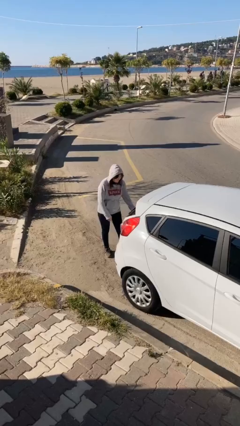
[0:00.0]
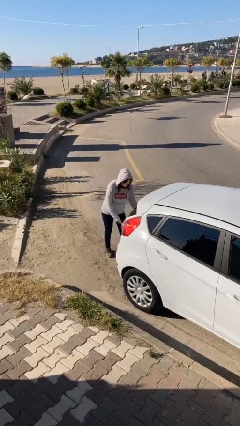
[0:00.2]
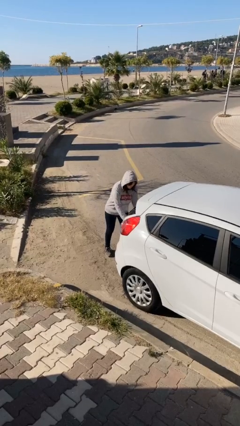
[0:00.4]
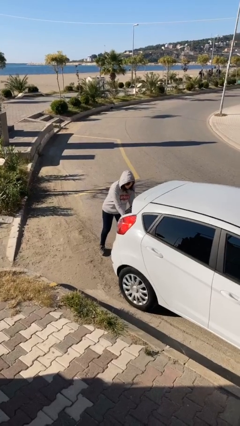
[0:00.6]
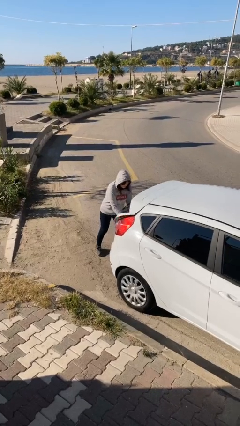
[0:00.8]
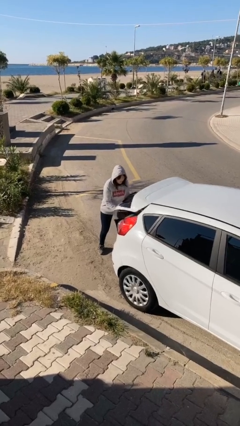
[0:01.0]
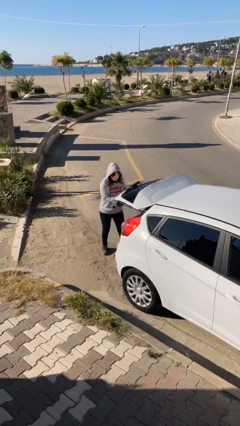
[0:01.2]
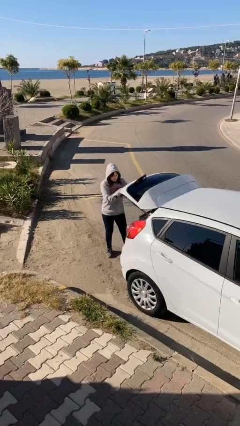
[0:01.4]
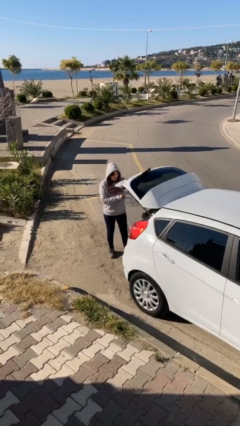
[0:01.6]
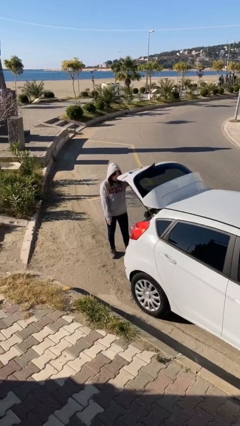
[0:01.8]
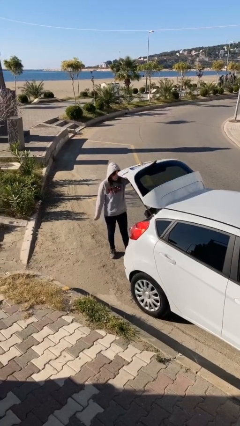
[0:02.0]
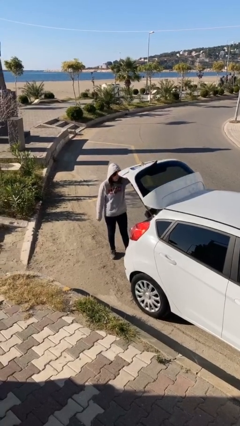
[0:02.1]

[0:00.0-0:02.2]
person opens car trunk

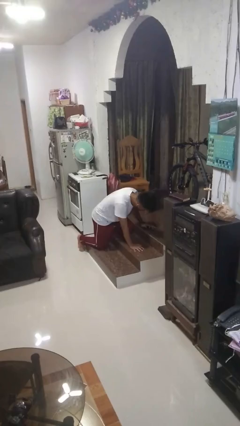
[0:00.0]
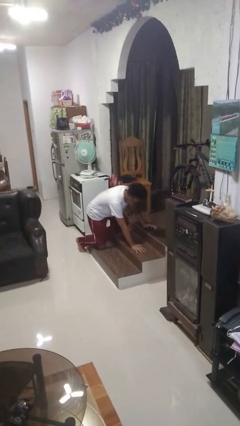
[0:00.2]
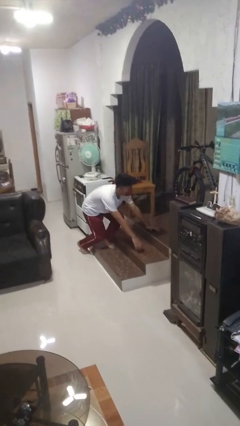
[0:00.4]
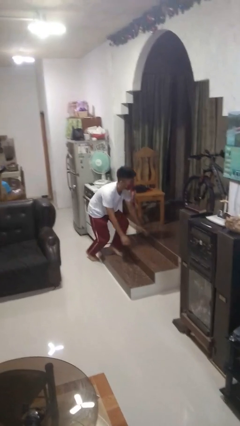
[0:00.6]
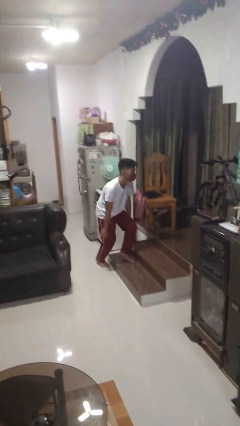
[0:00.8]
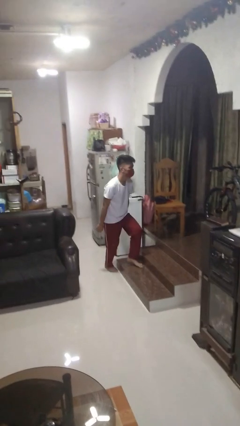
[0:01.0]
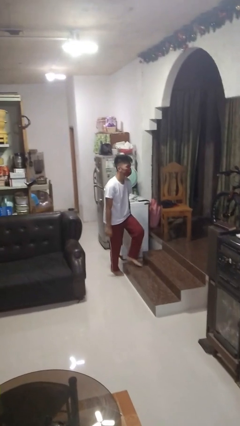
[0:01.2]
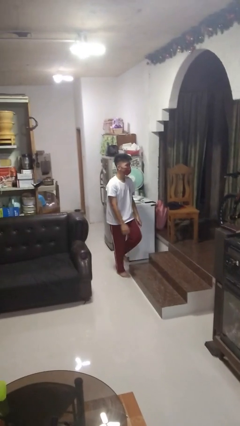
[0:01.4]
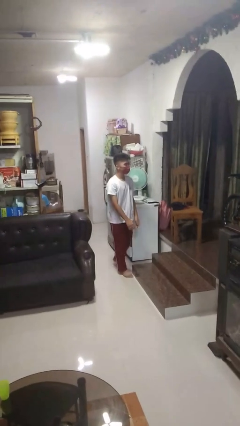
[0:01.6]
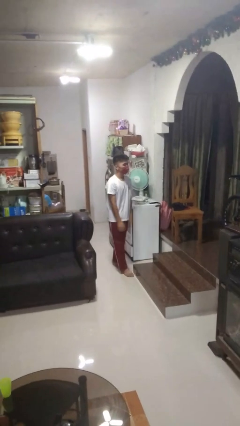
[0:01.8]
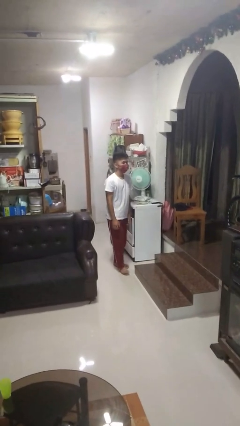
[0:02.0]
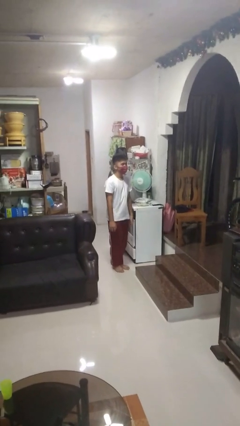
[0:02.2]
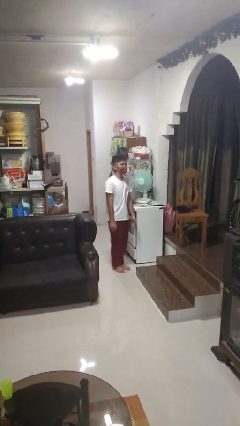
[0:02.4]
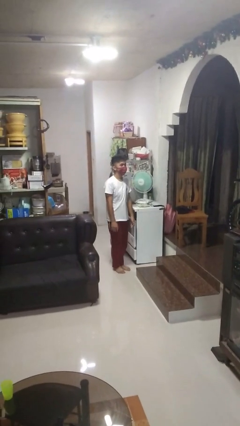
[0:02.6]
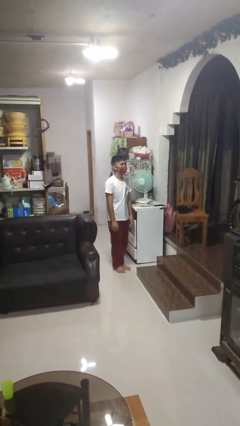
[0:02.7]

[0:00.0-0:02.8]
person stands up from floor

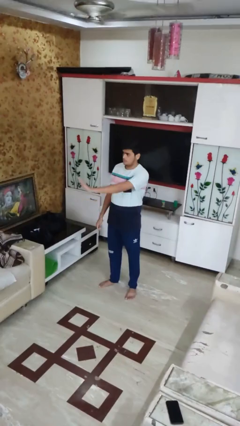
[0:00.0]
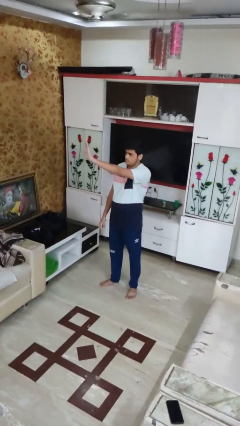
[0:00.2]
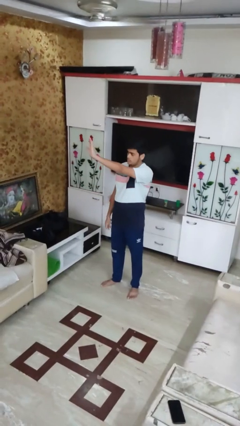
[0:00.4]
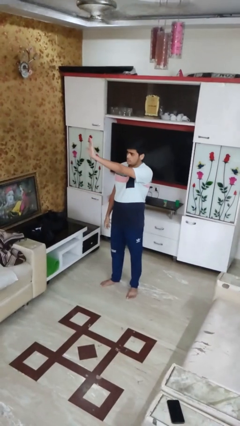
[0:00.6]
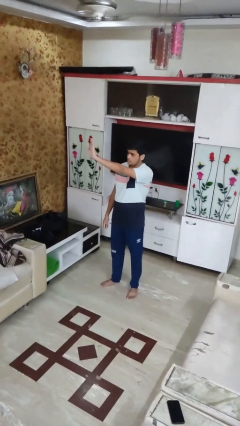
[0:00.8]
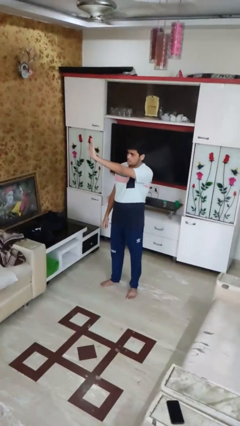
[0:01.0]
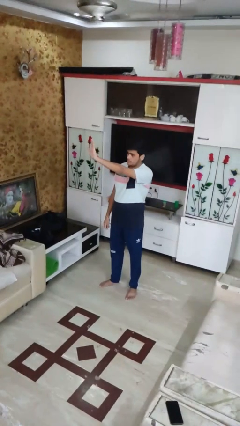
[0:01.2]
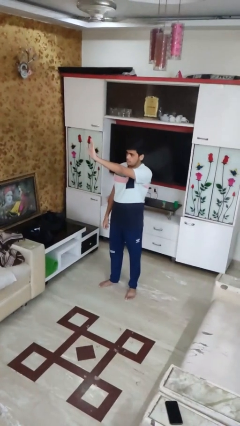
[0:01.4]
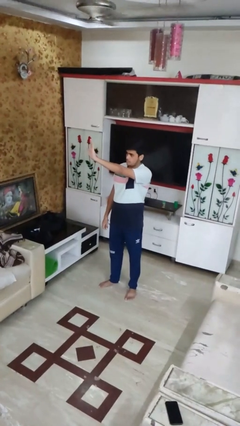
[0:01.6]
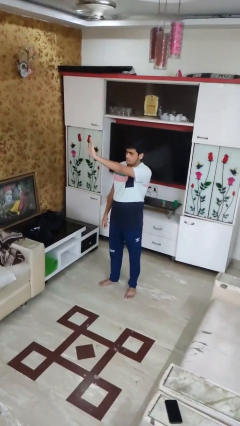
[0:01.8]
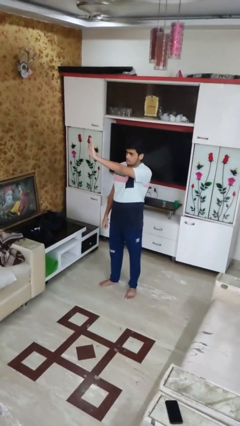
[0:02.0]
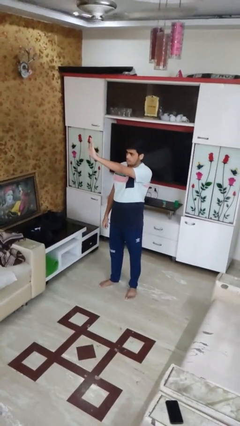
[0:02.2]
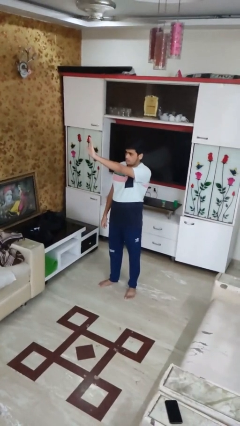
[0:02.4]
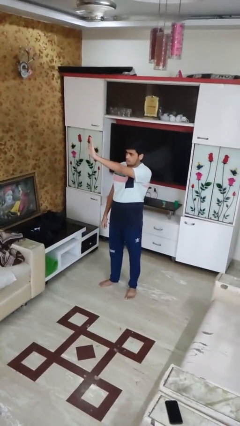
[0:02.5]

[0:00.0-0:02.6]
person gestures stop

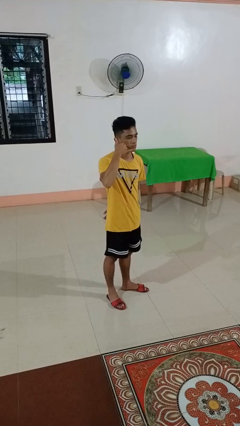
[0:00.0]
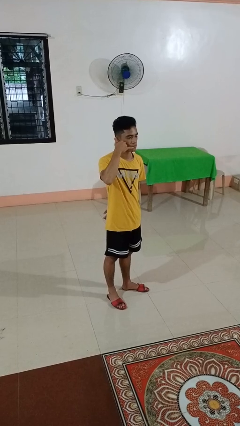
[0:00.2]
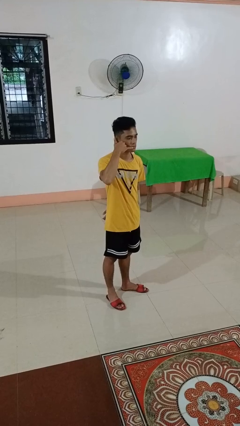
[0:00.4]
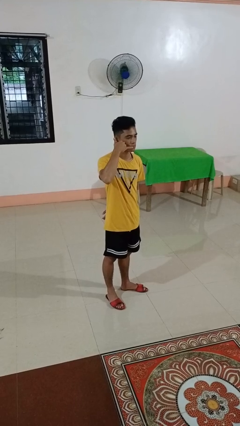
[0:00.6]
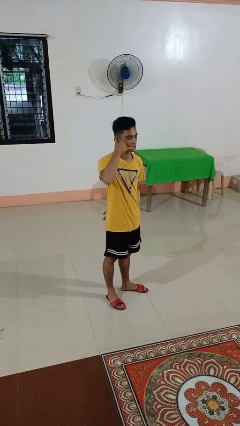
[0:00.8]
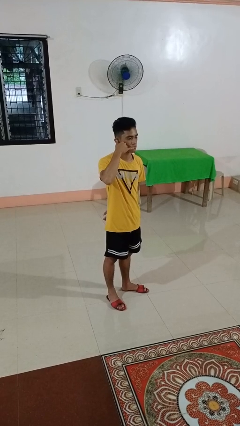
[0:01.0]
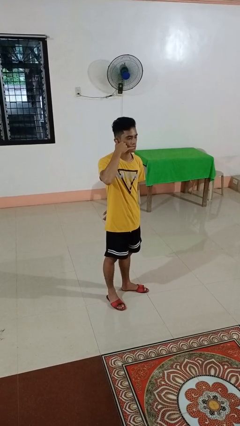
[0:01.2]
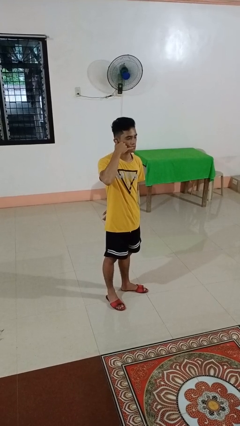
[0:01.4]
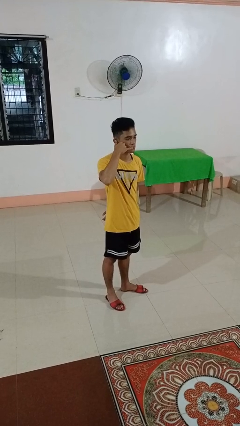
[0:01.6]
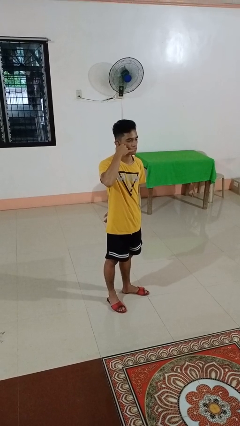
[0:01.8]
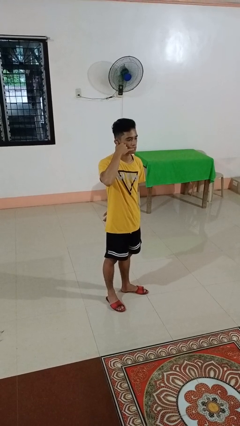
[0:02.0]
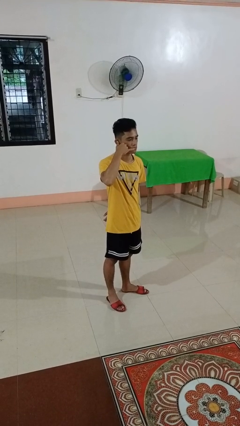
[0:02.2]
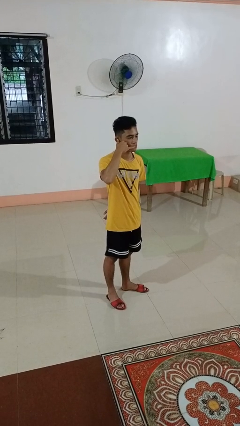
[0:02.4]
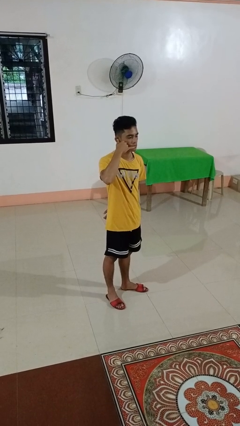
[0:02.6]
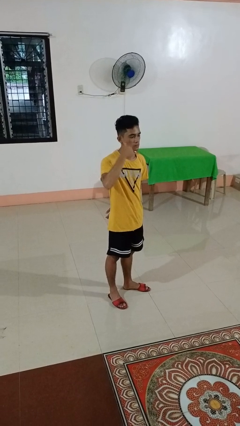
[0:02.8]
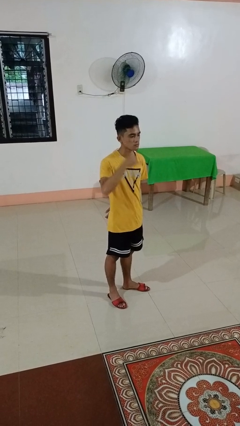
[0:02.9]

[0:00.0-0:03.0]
person gestures call me

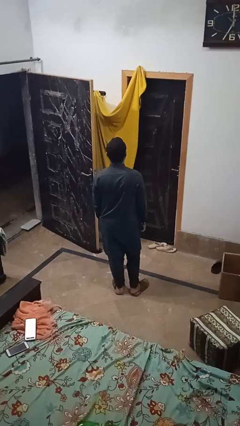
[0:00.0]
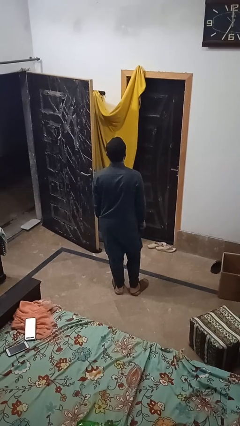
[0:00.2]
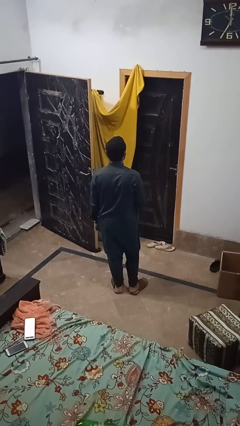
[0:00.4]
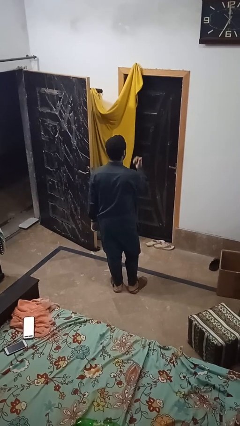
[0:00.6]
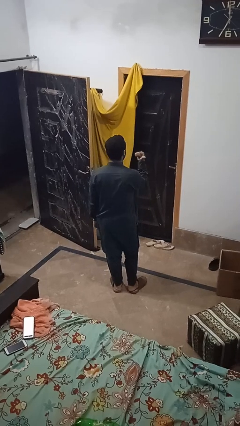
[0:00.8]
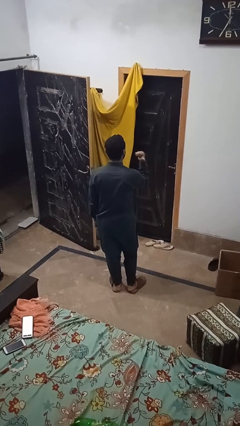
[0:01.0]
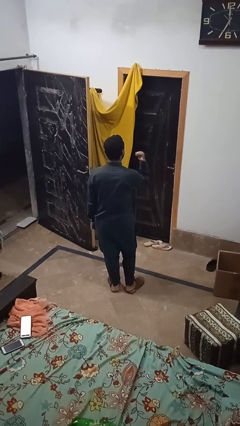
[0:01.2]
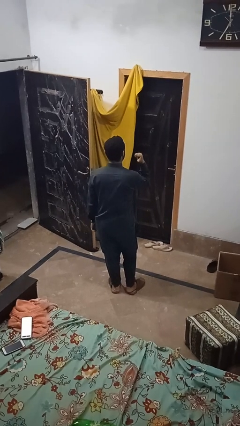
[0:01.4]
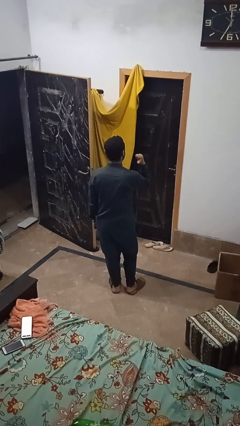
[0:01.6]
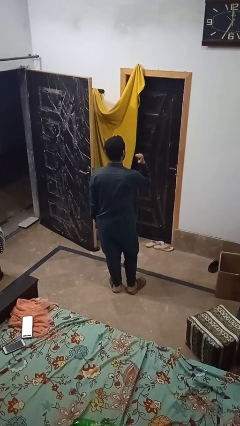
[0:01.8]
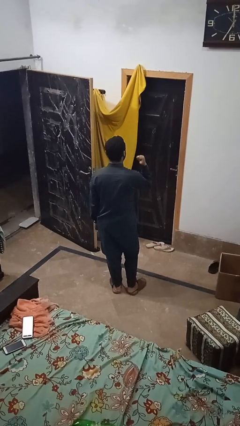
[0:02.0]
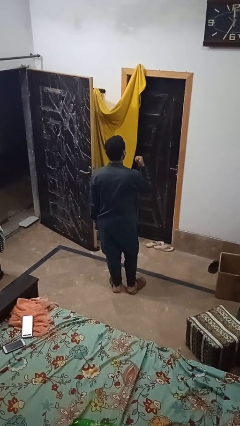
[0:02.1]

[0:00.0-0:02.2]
person gestures behind me

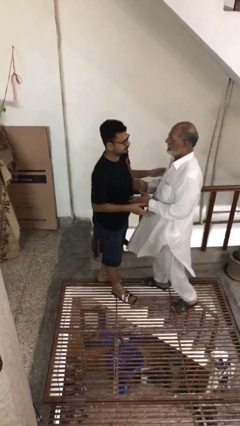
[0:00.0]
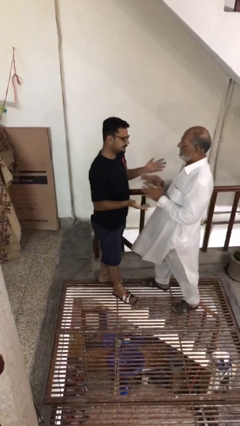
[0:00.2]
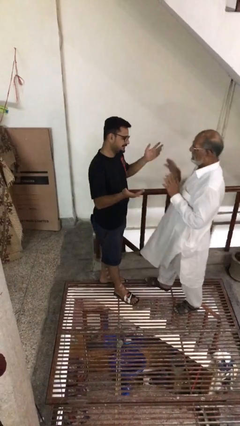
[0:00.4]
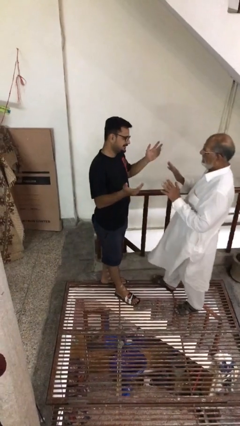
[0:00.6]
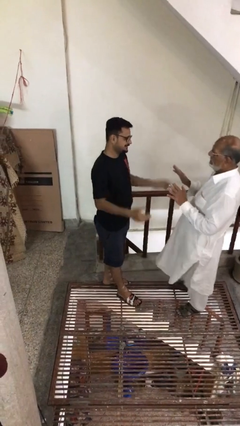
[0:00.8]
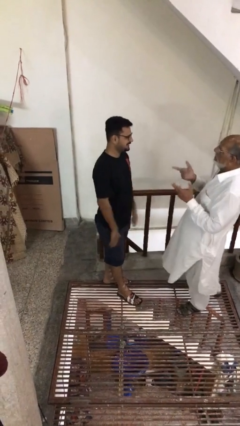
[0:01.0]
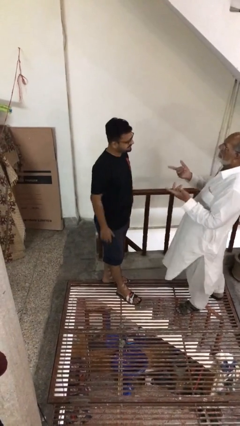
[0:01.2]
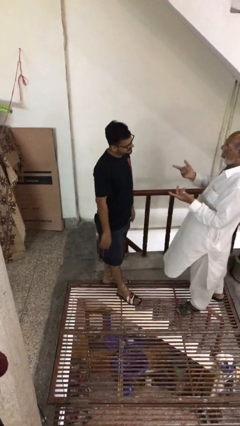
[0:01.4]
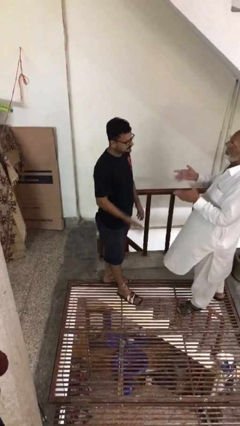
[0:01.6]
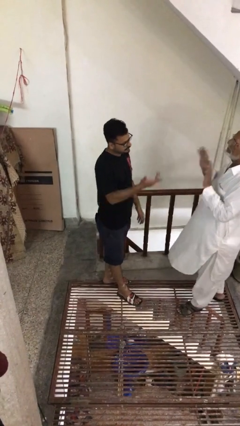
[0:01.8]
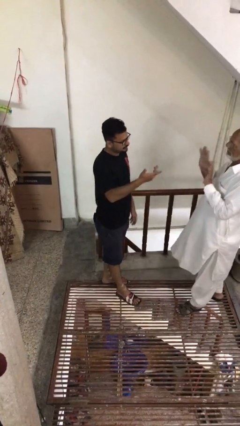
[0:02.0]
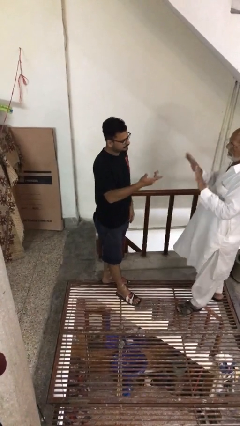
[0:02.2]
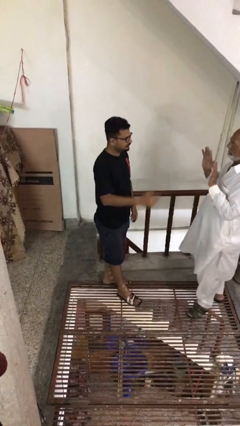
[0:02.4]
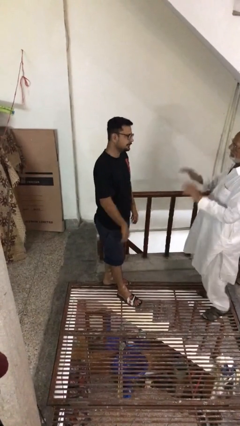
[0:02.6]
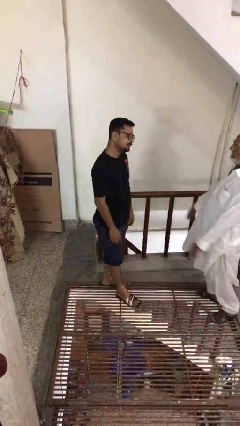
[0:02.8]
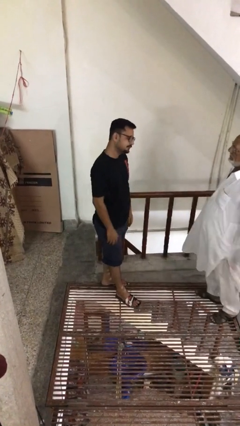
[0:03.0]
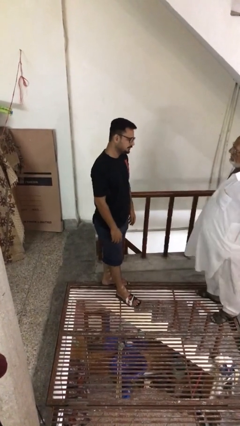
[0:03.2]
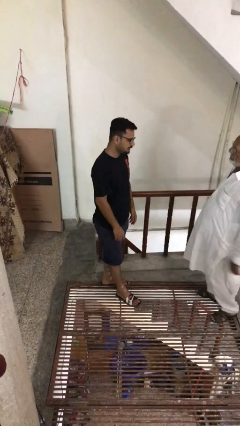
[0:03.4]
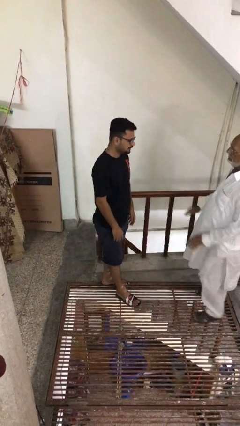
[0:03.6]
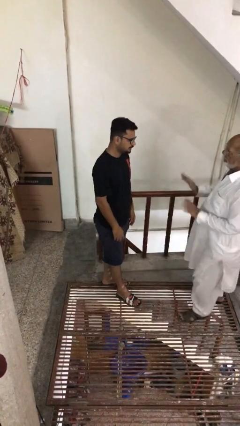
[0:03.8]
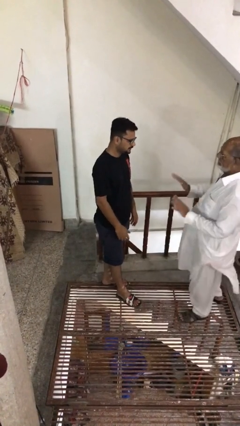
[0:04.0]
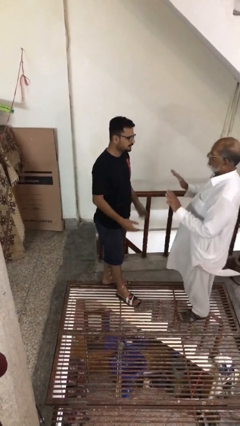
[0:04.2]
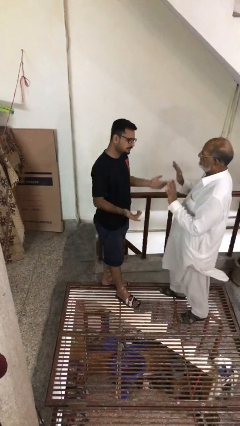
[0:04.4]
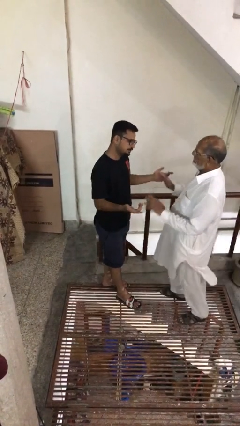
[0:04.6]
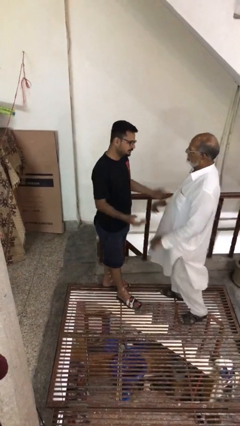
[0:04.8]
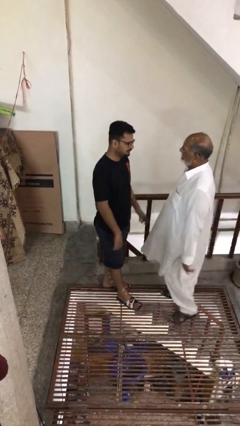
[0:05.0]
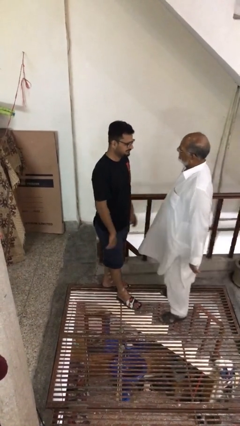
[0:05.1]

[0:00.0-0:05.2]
person talks to person
